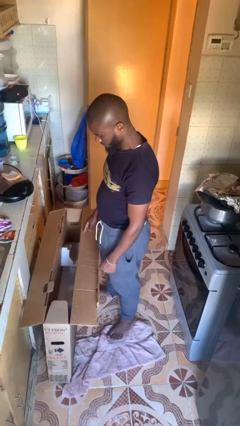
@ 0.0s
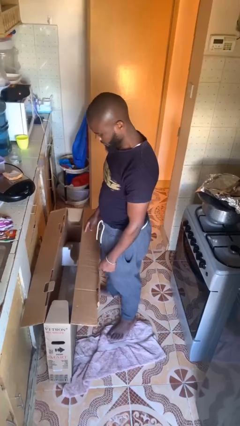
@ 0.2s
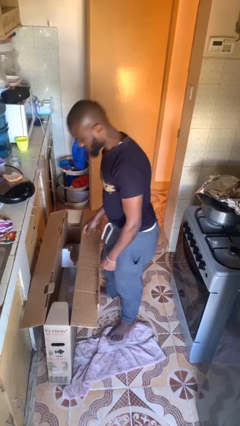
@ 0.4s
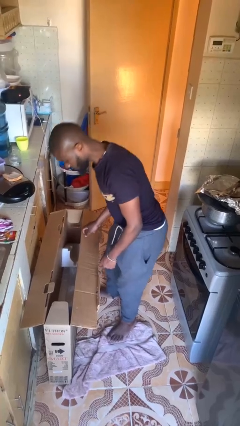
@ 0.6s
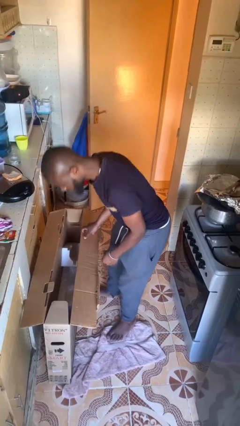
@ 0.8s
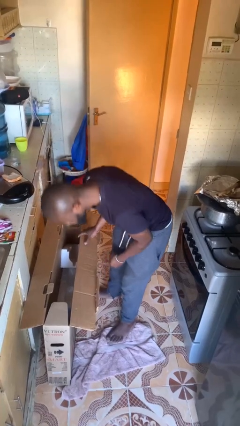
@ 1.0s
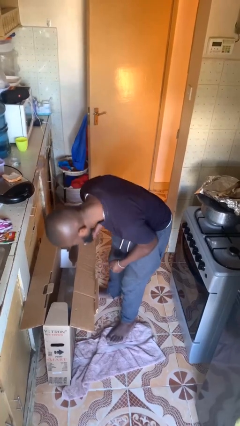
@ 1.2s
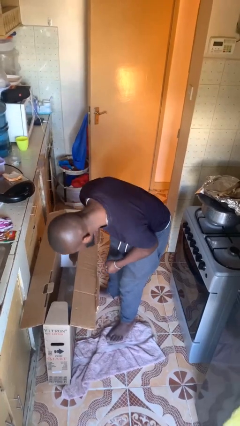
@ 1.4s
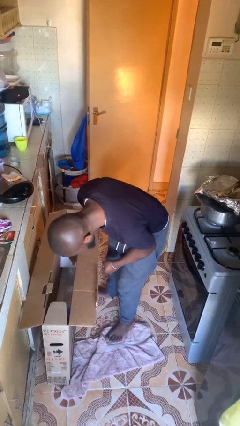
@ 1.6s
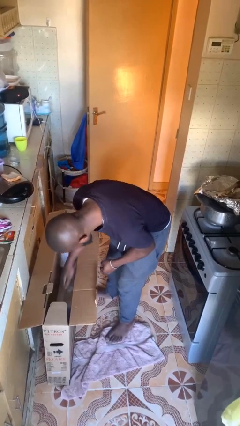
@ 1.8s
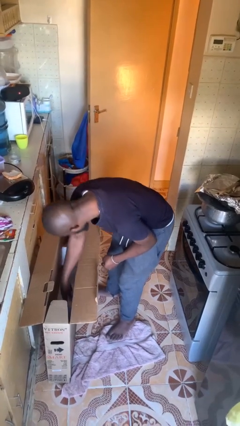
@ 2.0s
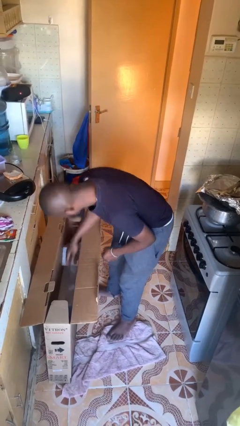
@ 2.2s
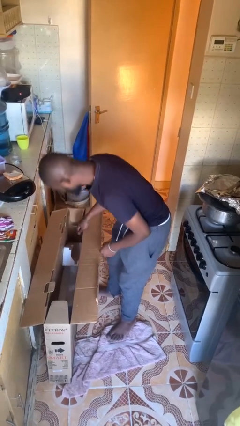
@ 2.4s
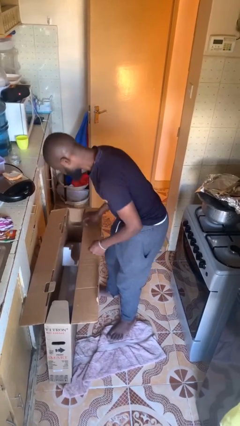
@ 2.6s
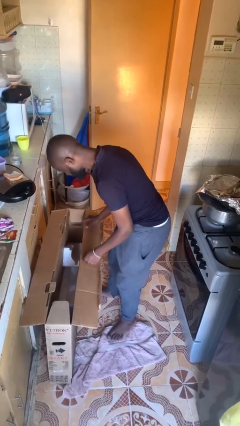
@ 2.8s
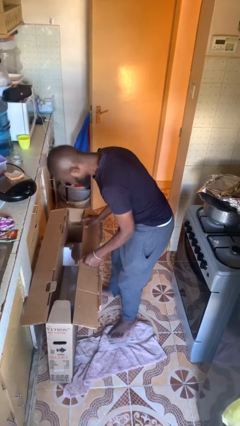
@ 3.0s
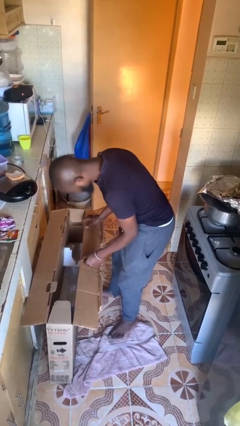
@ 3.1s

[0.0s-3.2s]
person searches in box

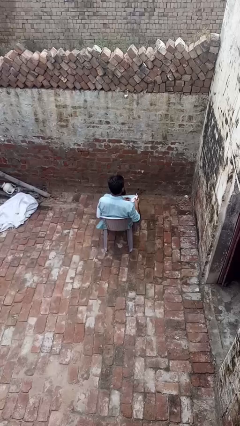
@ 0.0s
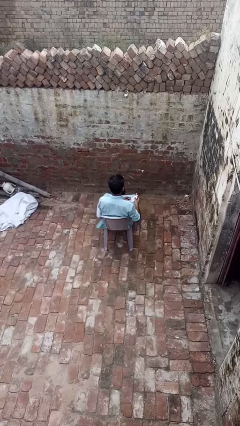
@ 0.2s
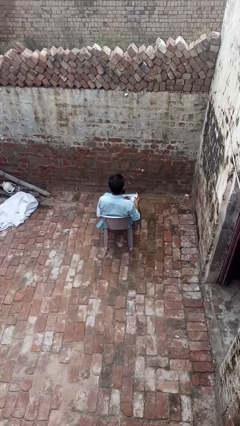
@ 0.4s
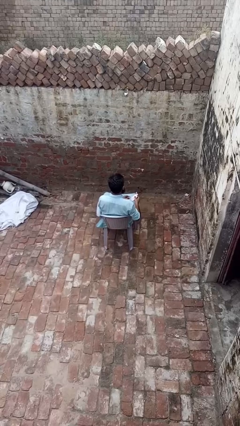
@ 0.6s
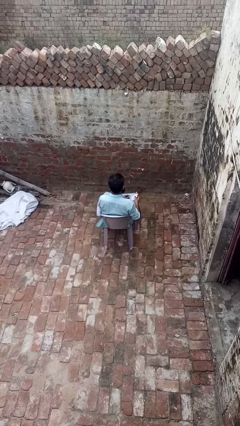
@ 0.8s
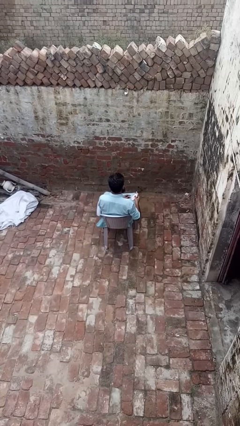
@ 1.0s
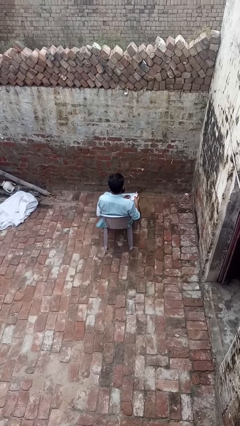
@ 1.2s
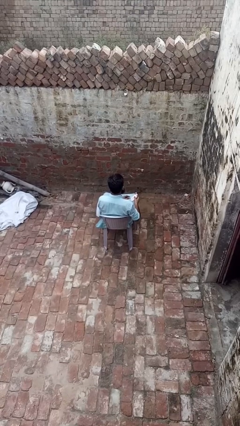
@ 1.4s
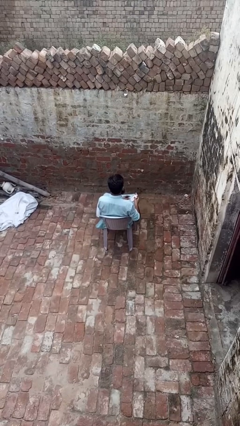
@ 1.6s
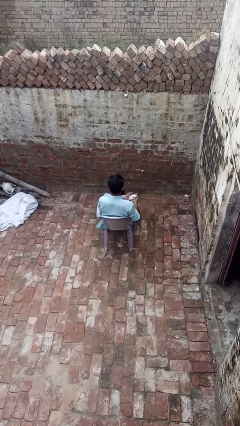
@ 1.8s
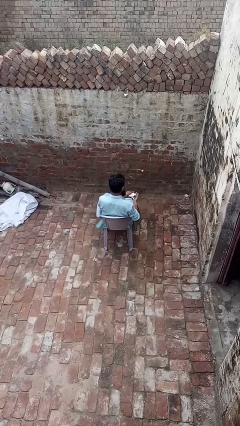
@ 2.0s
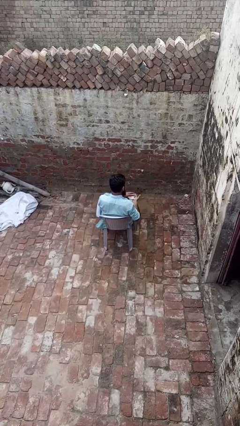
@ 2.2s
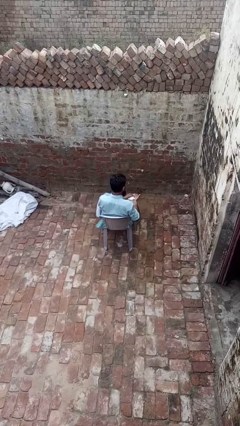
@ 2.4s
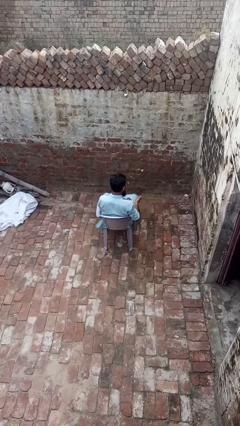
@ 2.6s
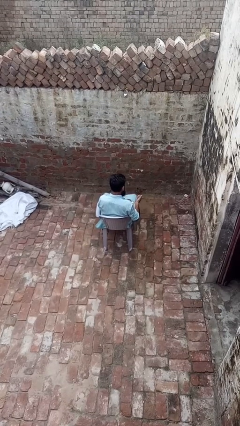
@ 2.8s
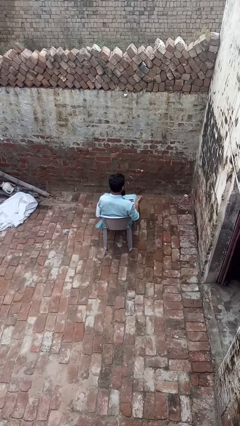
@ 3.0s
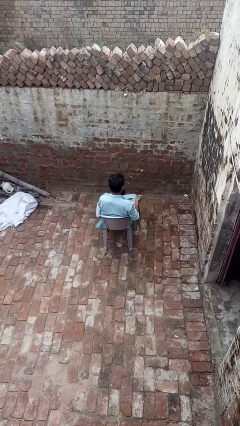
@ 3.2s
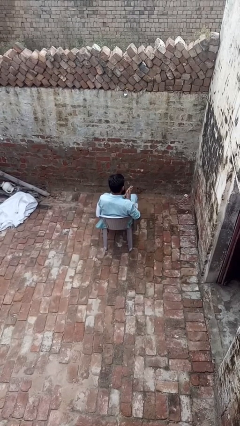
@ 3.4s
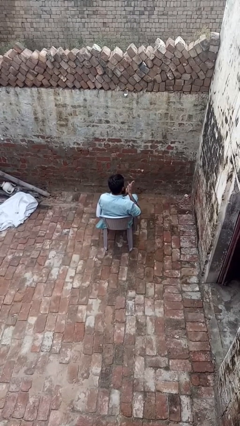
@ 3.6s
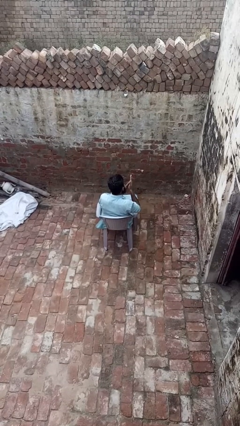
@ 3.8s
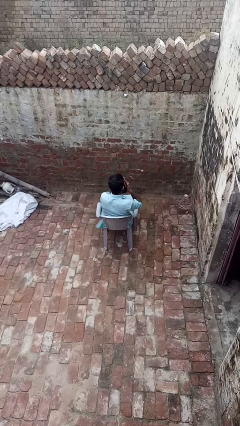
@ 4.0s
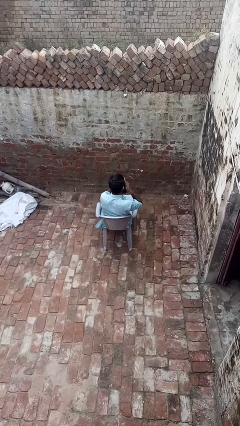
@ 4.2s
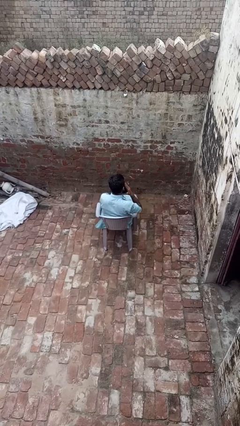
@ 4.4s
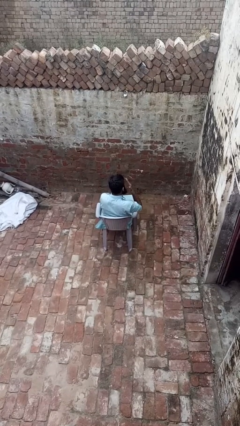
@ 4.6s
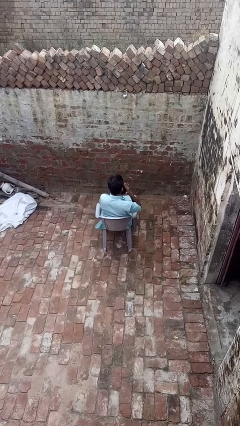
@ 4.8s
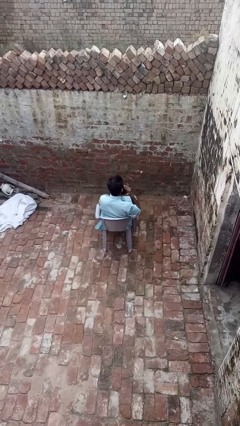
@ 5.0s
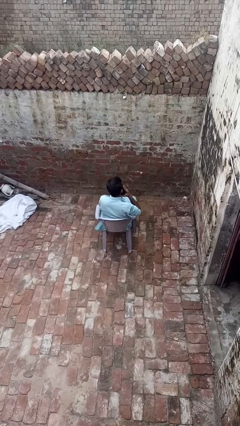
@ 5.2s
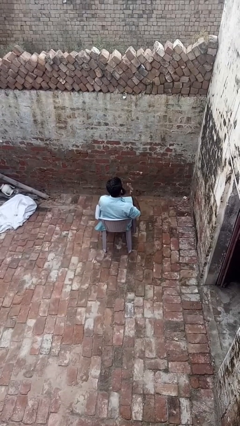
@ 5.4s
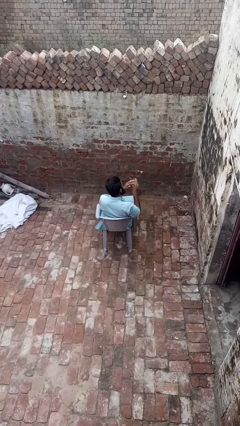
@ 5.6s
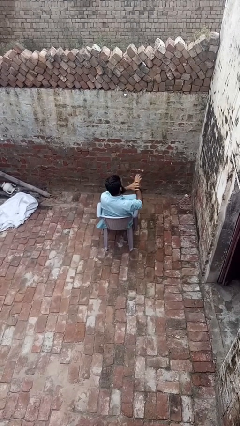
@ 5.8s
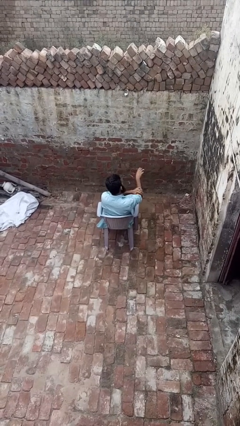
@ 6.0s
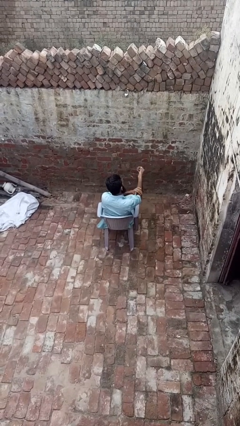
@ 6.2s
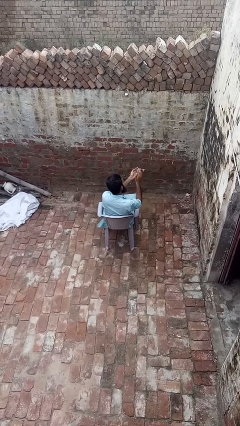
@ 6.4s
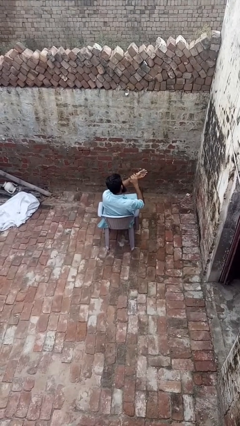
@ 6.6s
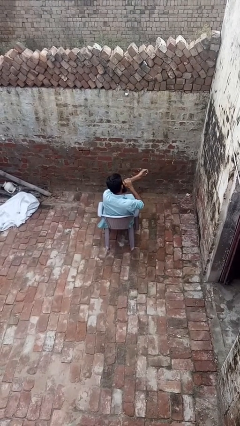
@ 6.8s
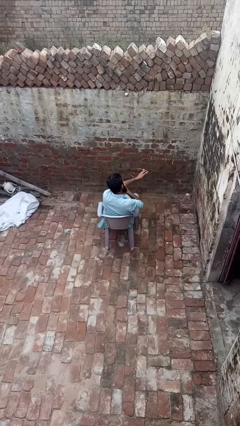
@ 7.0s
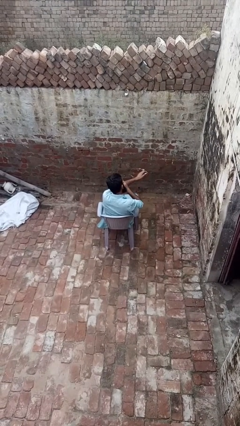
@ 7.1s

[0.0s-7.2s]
person applies sunscreen

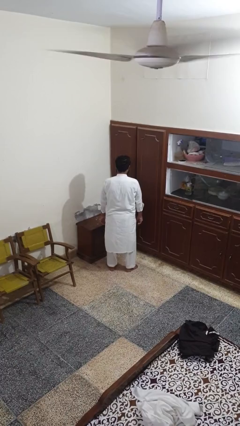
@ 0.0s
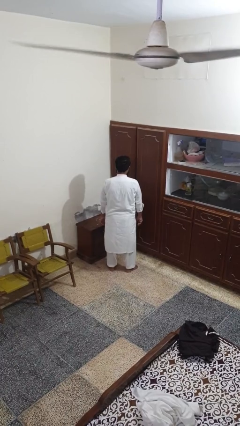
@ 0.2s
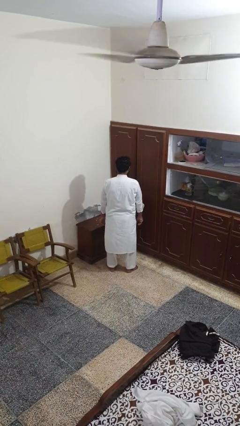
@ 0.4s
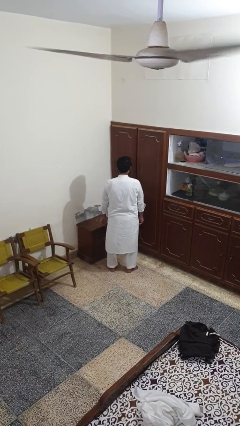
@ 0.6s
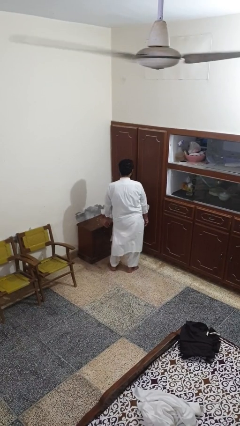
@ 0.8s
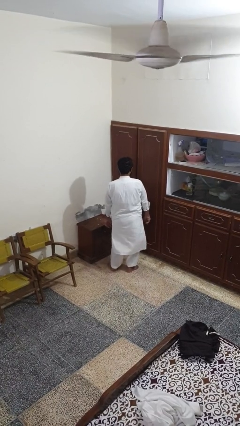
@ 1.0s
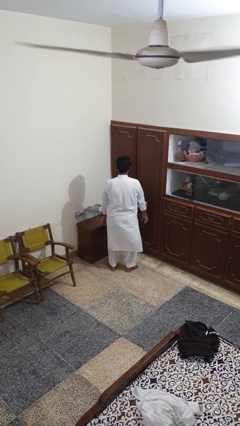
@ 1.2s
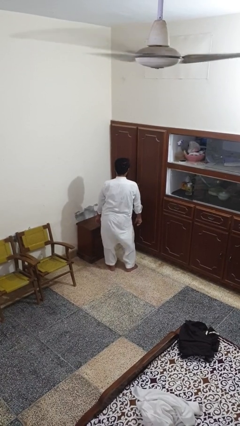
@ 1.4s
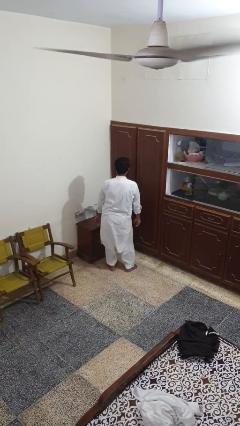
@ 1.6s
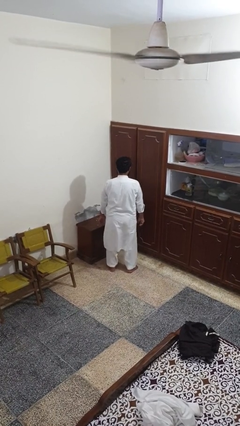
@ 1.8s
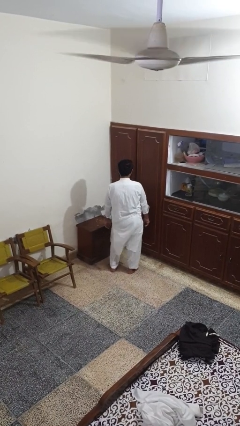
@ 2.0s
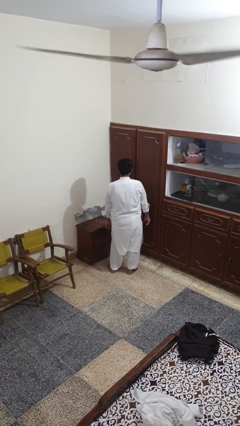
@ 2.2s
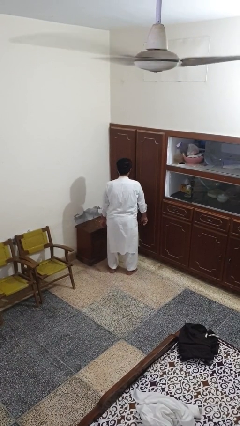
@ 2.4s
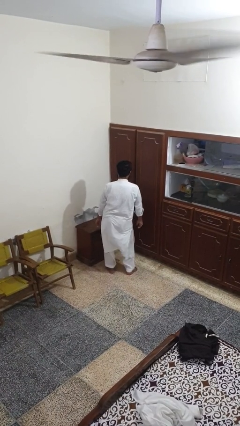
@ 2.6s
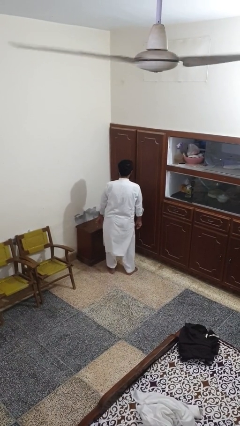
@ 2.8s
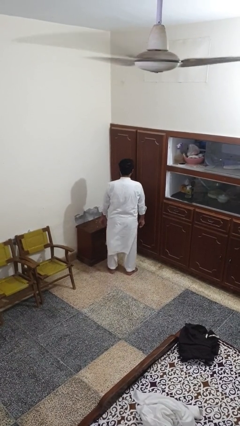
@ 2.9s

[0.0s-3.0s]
person wiggles hips

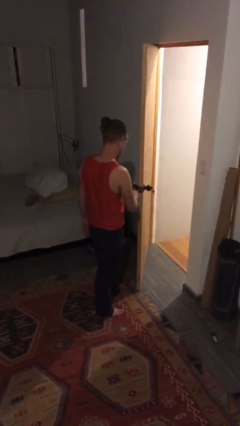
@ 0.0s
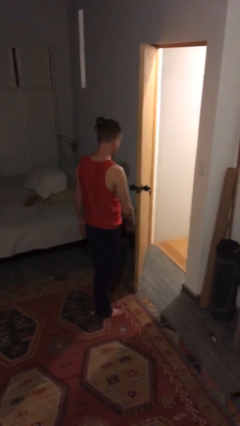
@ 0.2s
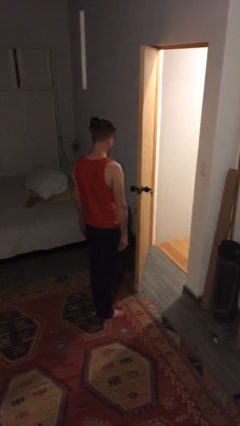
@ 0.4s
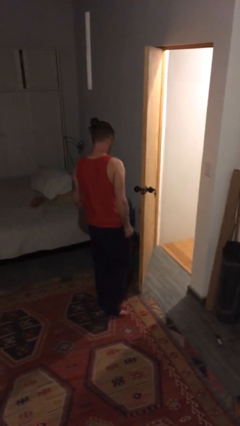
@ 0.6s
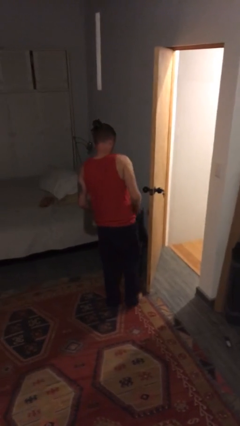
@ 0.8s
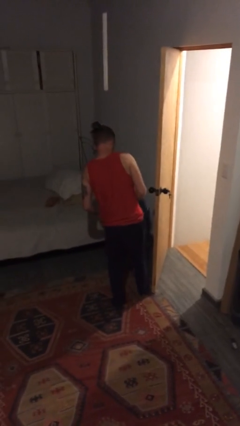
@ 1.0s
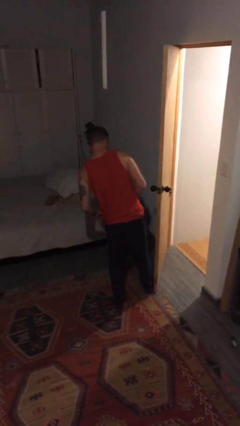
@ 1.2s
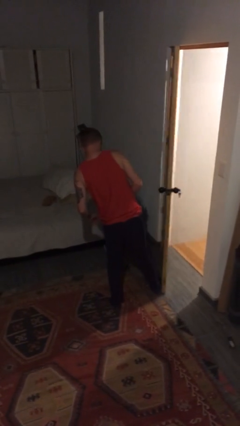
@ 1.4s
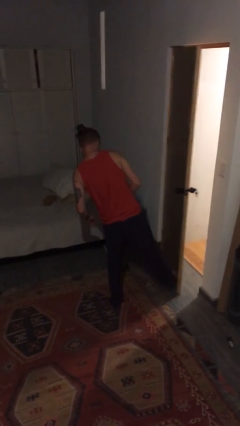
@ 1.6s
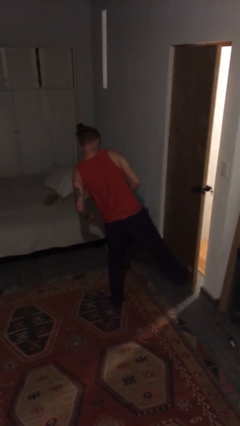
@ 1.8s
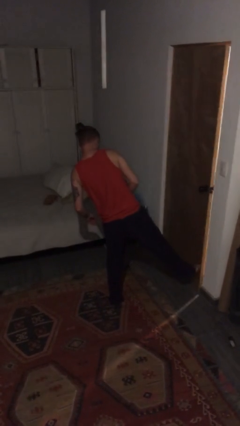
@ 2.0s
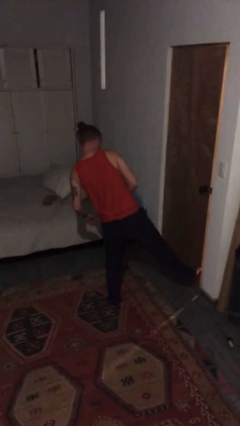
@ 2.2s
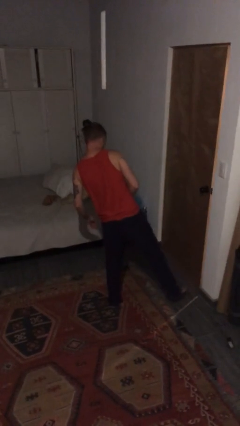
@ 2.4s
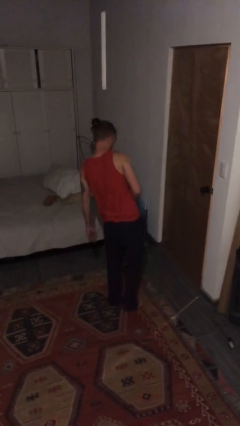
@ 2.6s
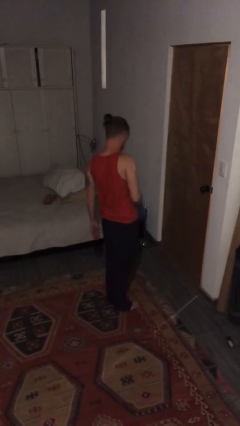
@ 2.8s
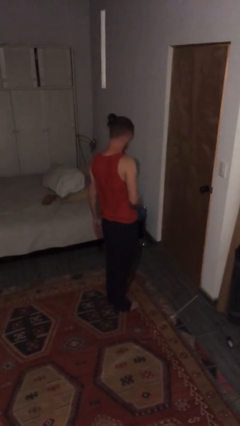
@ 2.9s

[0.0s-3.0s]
person closes door with foot

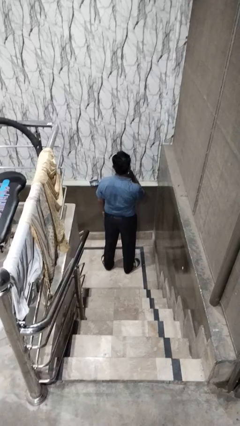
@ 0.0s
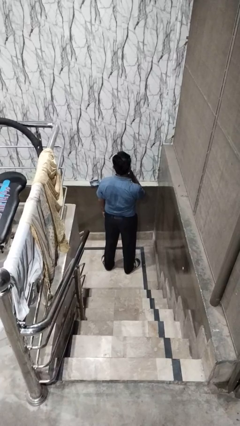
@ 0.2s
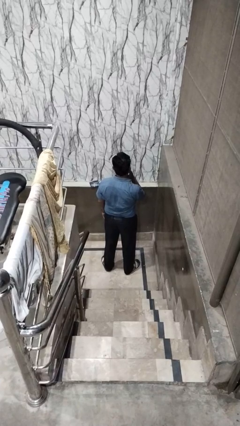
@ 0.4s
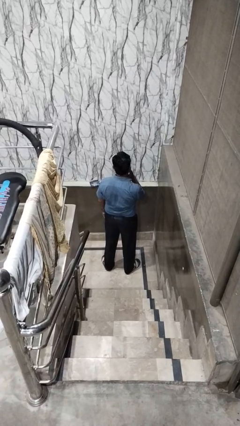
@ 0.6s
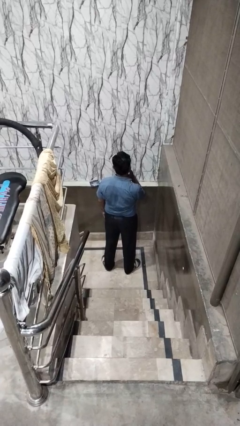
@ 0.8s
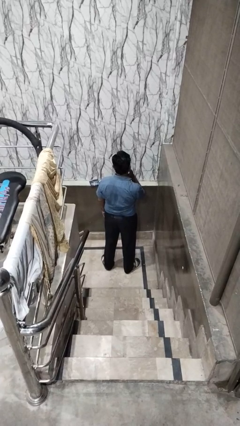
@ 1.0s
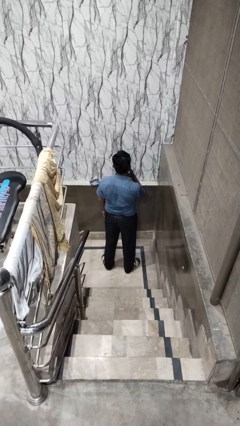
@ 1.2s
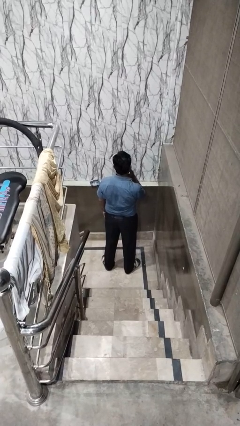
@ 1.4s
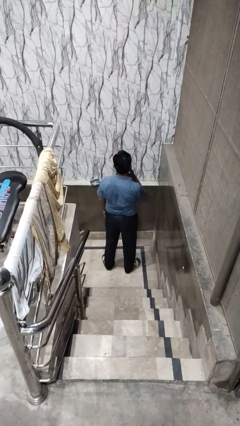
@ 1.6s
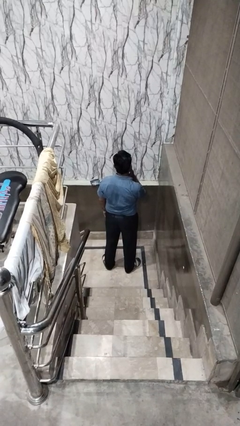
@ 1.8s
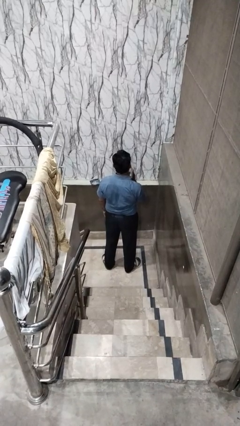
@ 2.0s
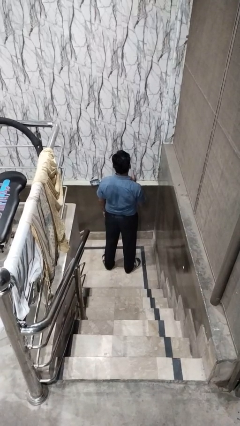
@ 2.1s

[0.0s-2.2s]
person strokes chin
